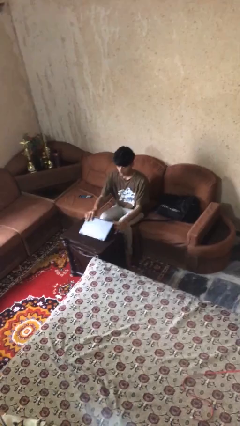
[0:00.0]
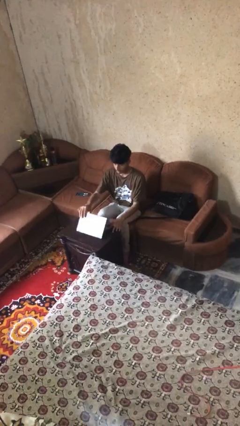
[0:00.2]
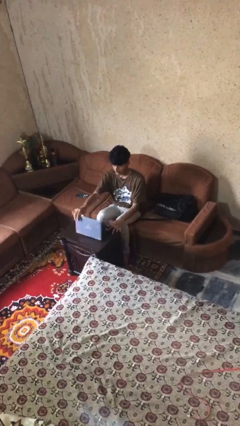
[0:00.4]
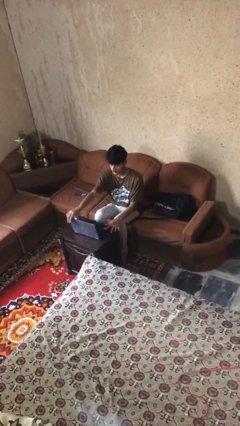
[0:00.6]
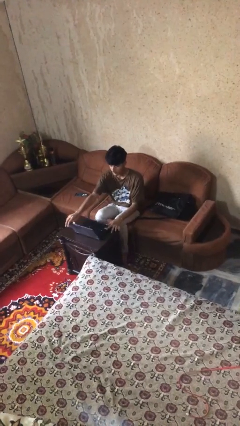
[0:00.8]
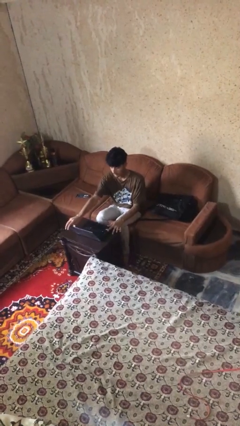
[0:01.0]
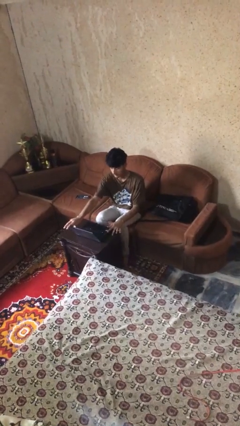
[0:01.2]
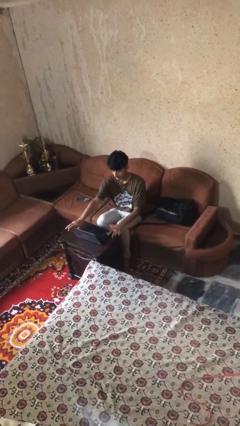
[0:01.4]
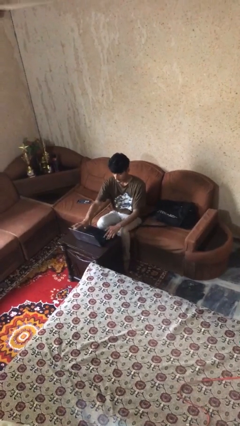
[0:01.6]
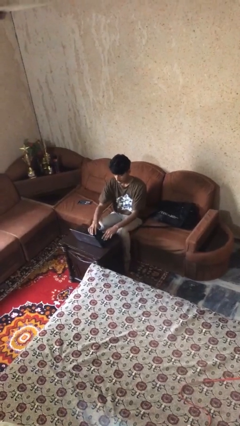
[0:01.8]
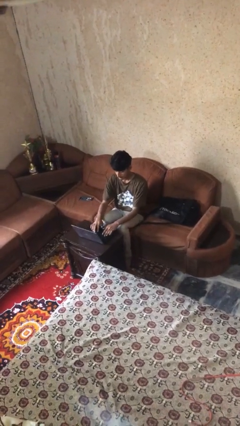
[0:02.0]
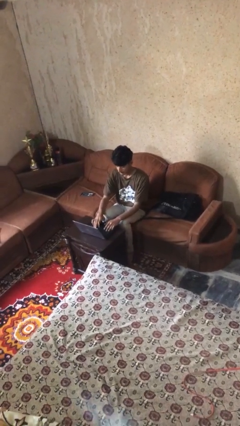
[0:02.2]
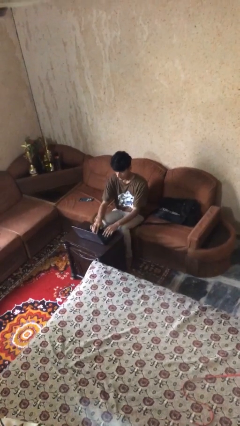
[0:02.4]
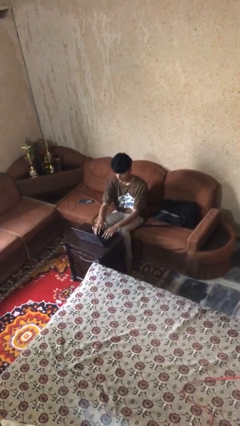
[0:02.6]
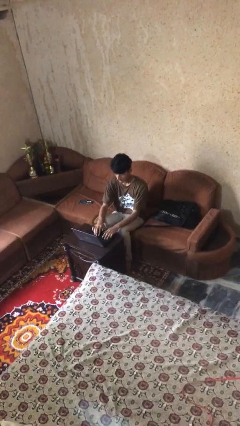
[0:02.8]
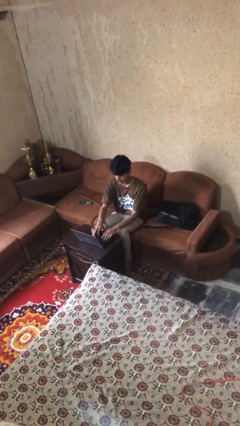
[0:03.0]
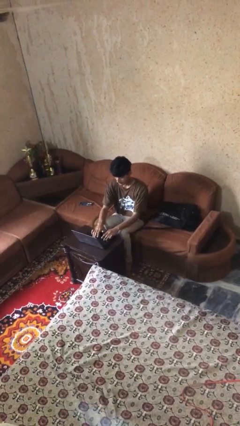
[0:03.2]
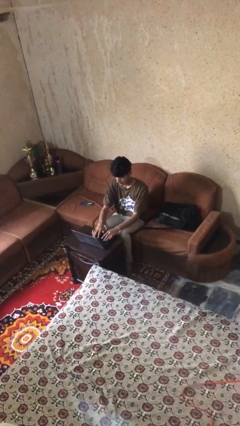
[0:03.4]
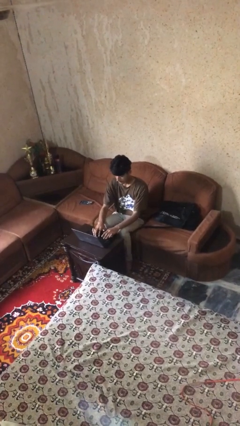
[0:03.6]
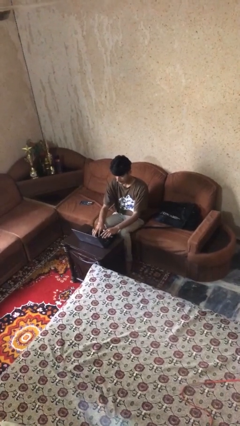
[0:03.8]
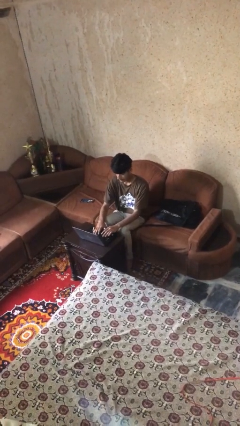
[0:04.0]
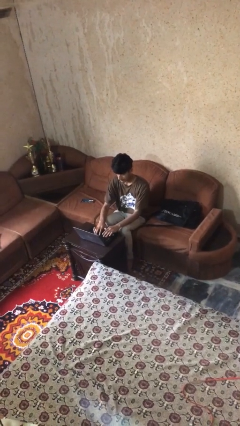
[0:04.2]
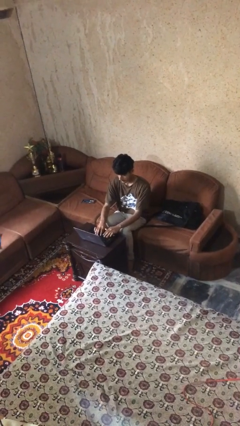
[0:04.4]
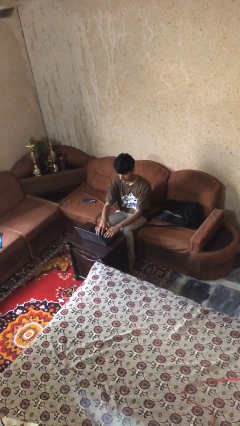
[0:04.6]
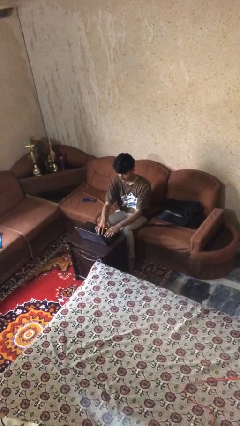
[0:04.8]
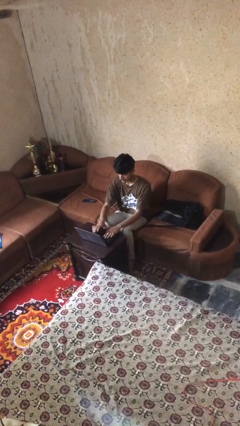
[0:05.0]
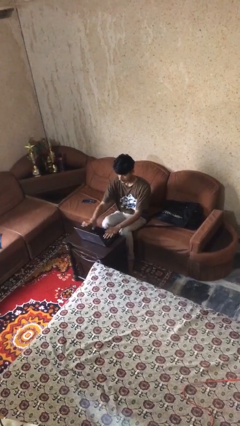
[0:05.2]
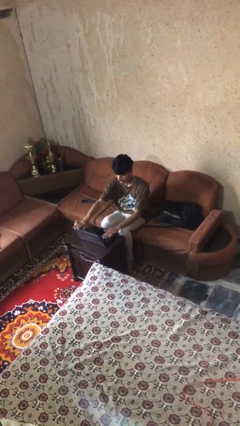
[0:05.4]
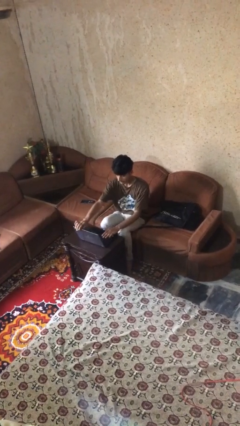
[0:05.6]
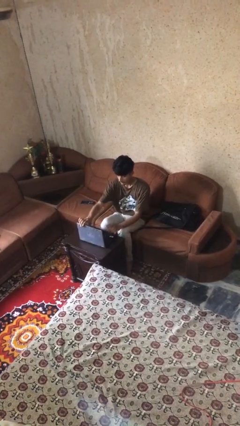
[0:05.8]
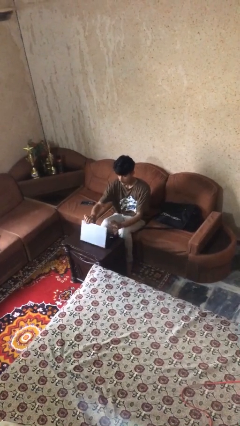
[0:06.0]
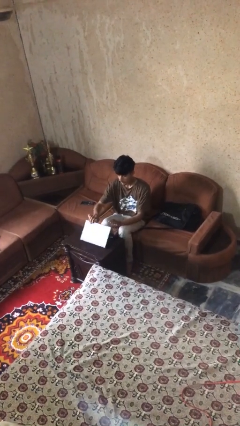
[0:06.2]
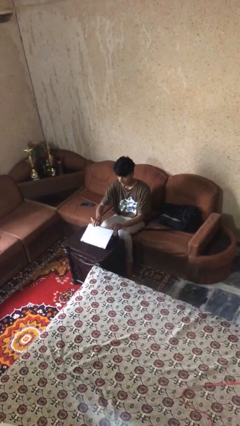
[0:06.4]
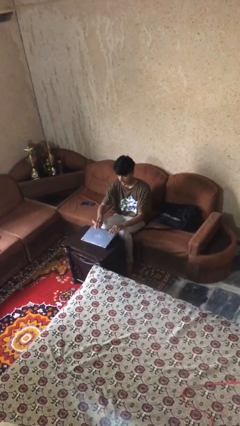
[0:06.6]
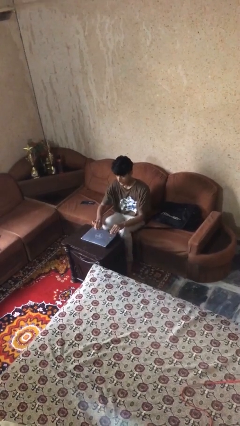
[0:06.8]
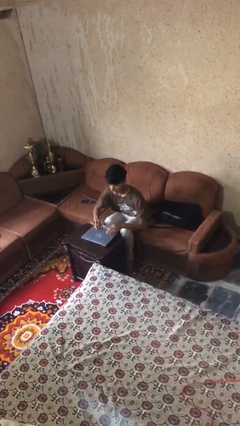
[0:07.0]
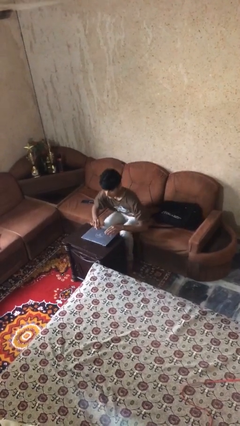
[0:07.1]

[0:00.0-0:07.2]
person interacts with laptop

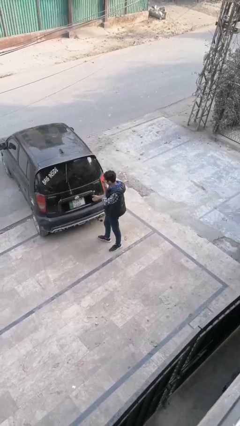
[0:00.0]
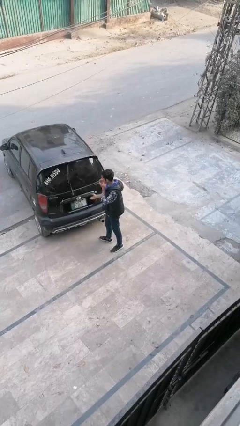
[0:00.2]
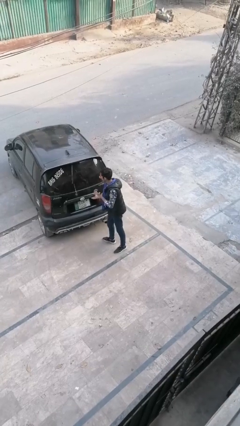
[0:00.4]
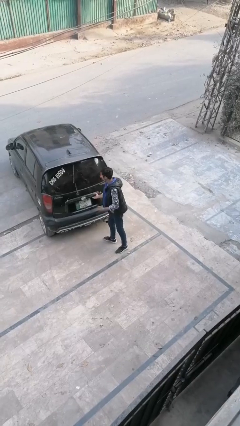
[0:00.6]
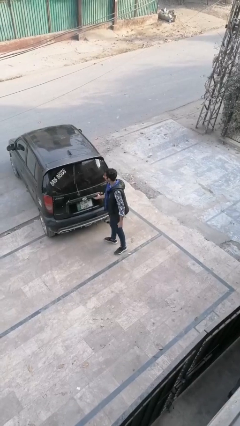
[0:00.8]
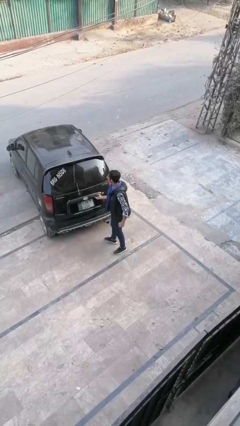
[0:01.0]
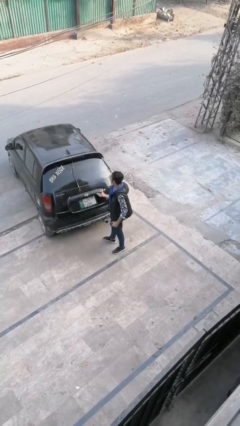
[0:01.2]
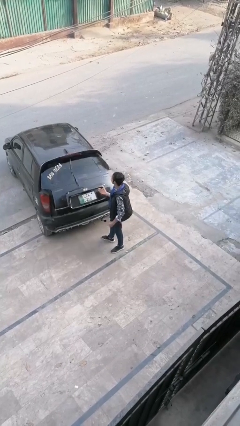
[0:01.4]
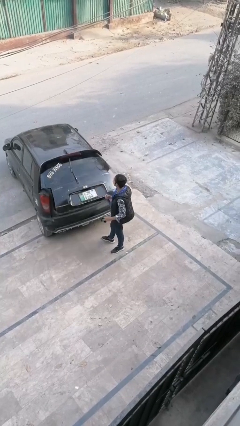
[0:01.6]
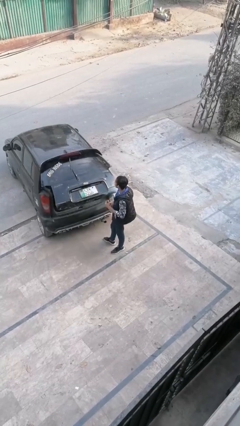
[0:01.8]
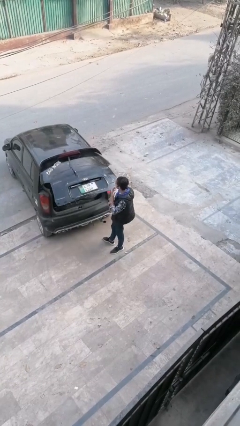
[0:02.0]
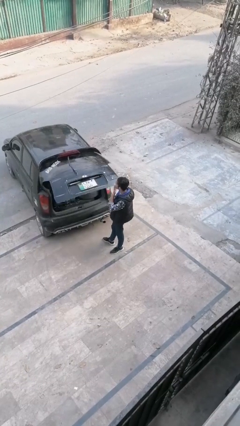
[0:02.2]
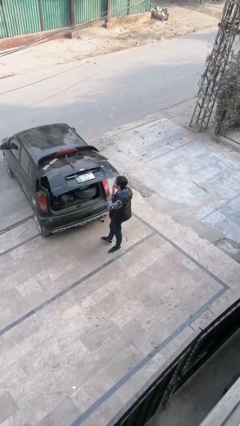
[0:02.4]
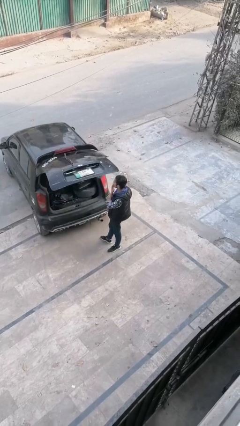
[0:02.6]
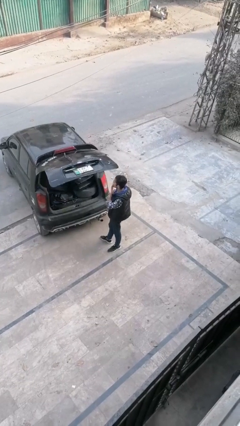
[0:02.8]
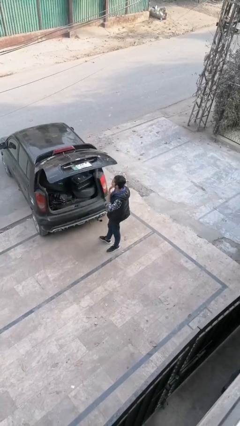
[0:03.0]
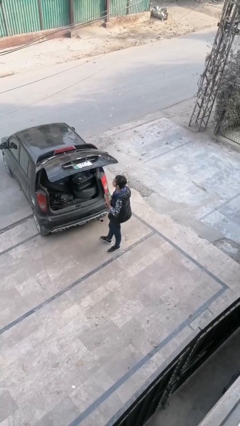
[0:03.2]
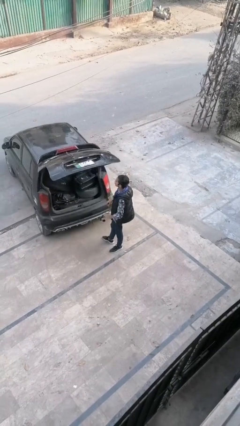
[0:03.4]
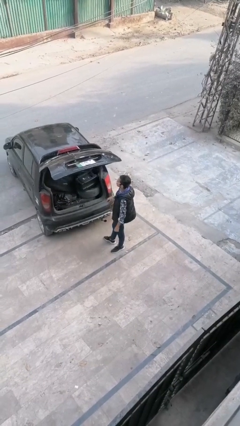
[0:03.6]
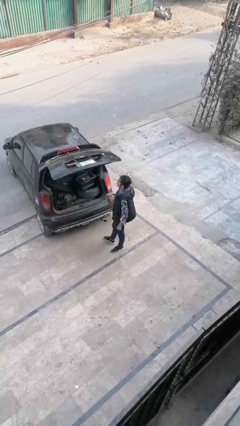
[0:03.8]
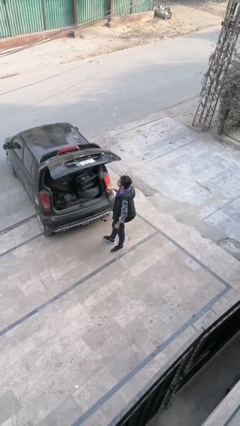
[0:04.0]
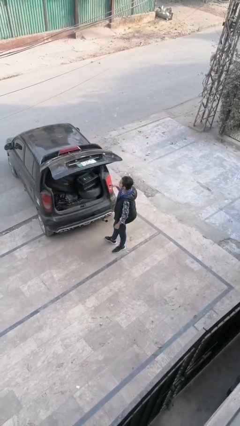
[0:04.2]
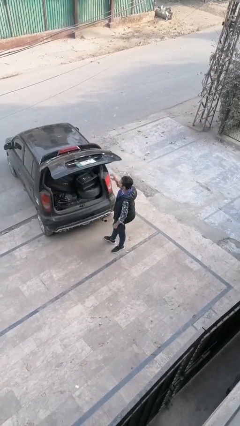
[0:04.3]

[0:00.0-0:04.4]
person opens car trunk

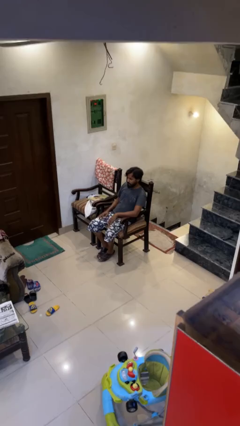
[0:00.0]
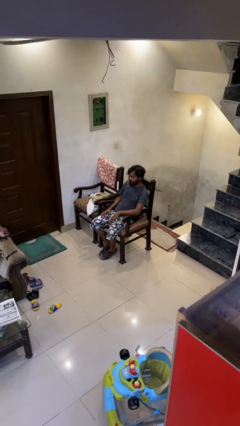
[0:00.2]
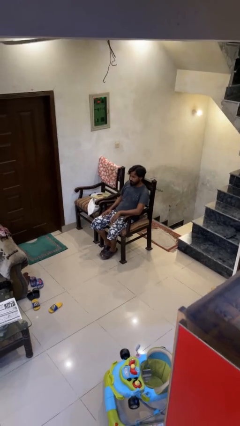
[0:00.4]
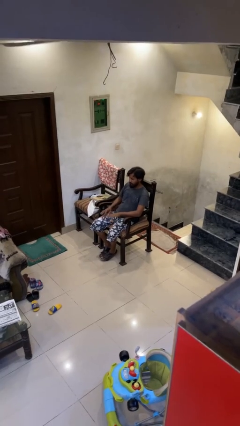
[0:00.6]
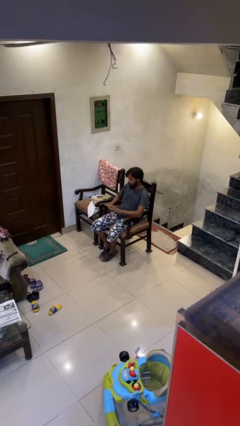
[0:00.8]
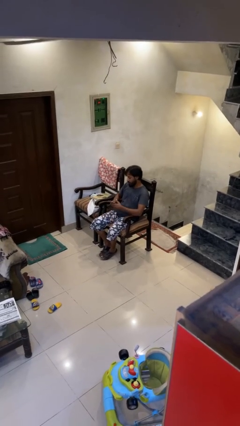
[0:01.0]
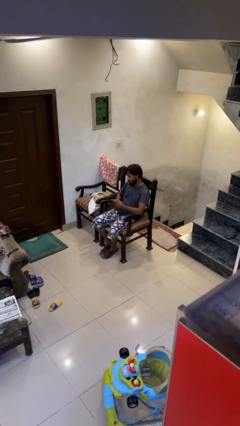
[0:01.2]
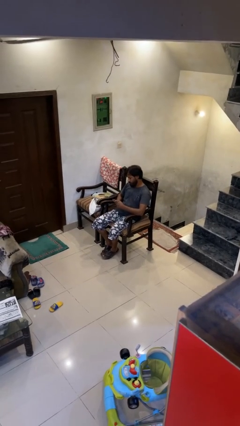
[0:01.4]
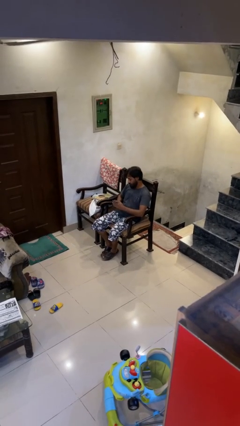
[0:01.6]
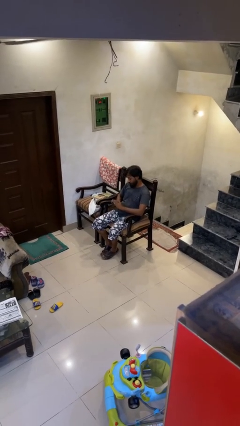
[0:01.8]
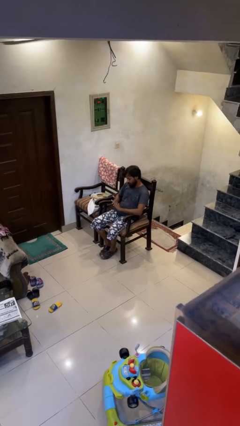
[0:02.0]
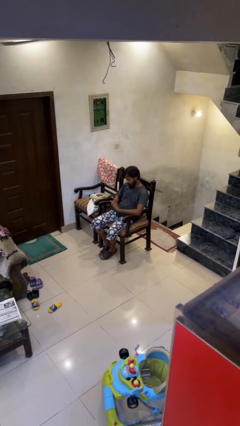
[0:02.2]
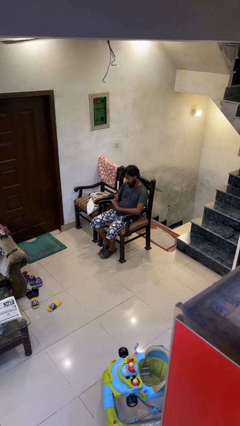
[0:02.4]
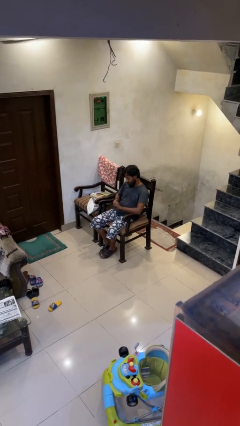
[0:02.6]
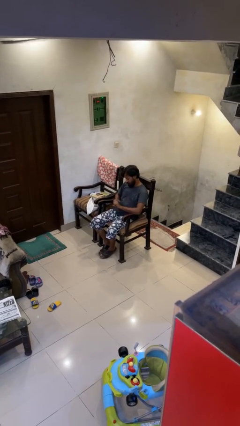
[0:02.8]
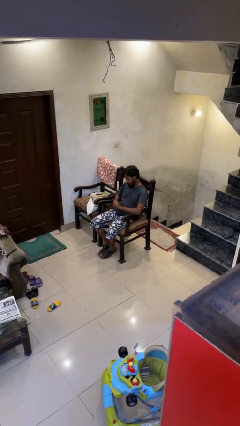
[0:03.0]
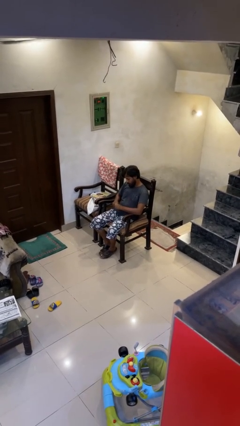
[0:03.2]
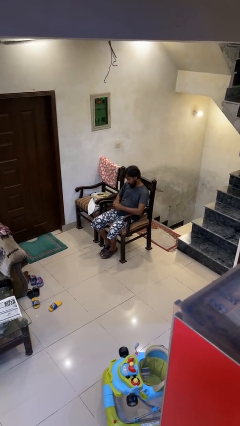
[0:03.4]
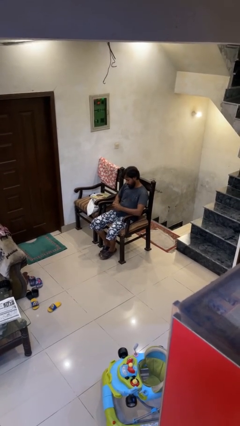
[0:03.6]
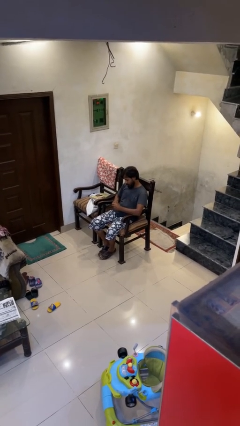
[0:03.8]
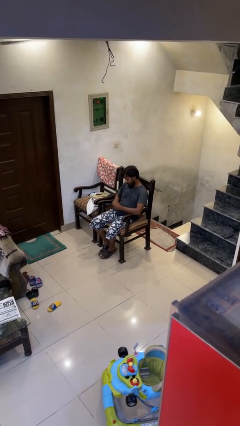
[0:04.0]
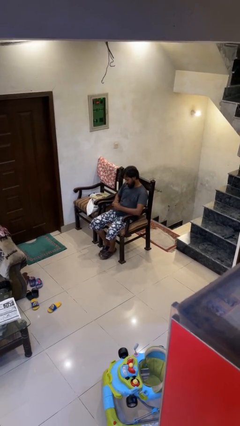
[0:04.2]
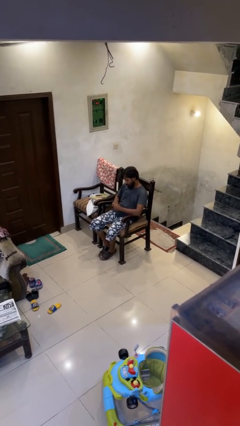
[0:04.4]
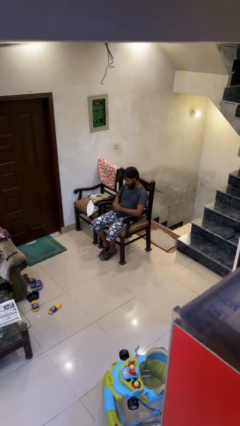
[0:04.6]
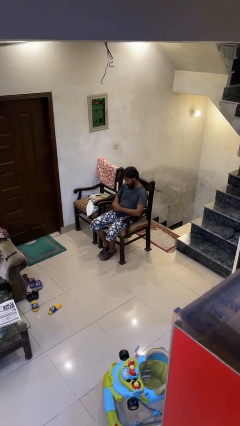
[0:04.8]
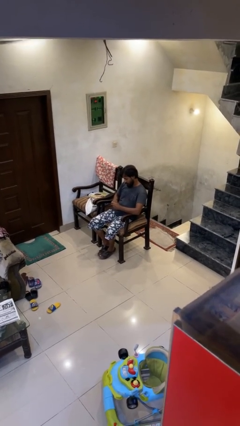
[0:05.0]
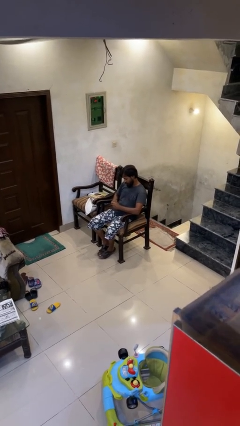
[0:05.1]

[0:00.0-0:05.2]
person looks at hands in lap

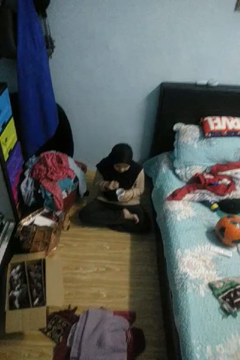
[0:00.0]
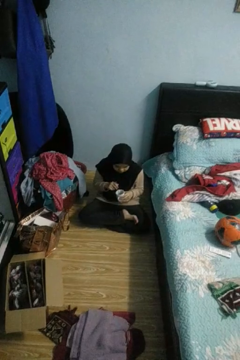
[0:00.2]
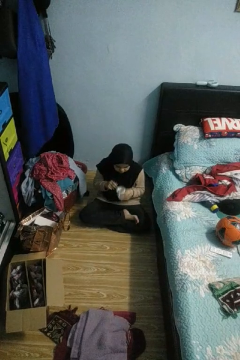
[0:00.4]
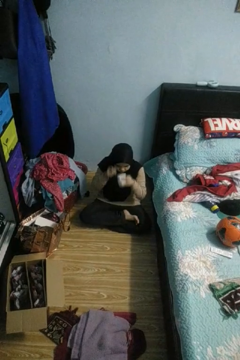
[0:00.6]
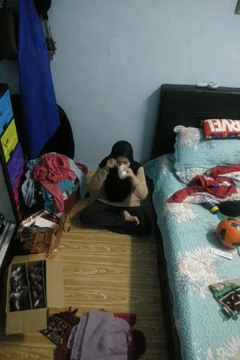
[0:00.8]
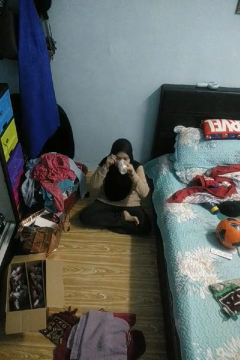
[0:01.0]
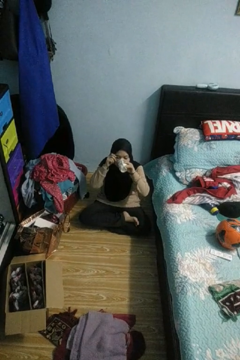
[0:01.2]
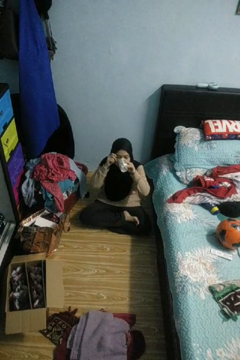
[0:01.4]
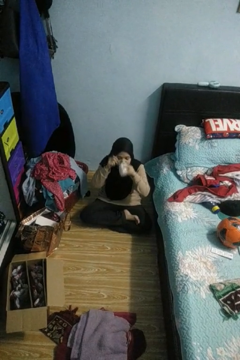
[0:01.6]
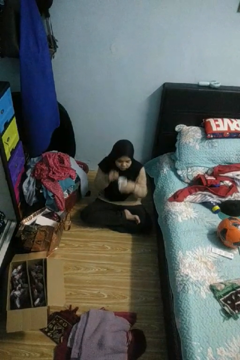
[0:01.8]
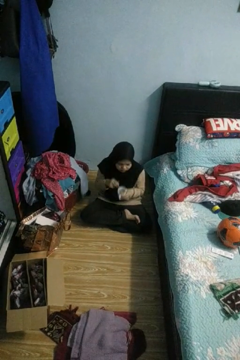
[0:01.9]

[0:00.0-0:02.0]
person drinks from mug
